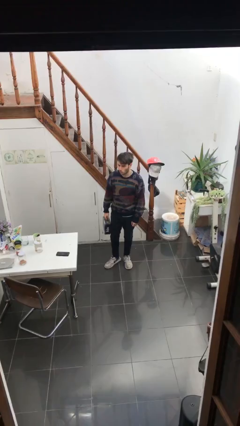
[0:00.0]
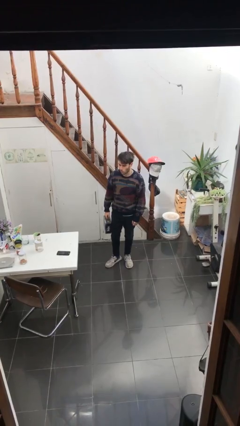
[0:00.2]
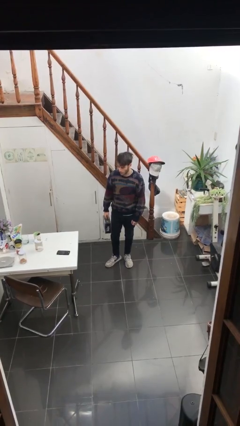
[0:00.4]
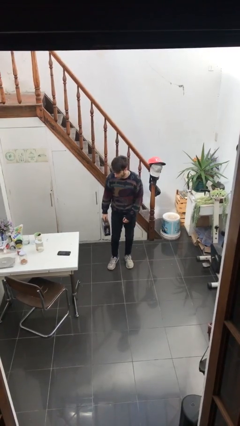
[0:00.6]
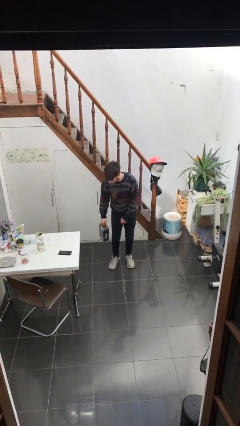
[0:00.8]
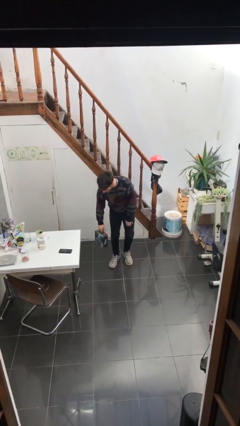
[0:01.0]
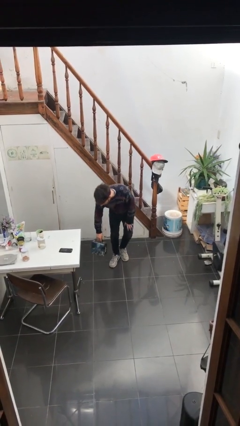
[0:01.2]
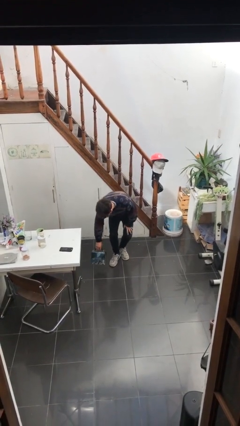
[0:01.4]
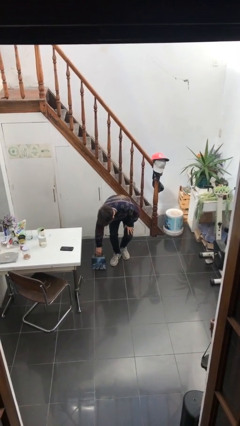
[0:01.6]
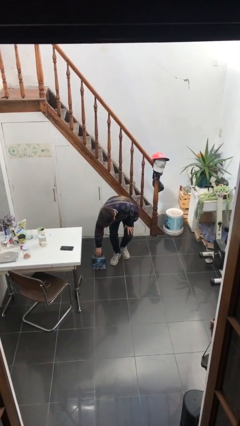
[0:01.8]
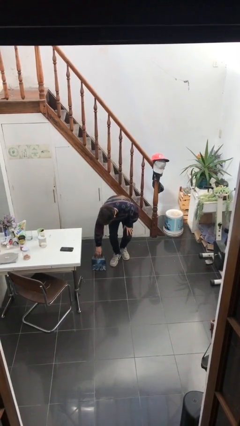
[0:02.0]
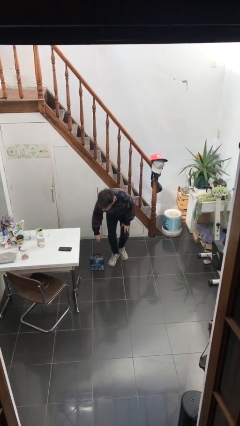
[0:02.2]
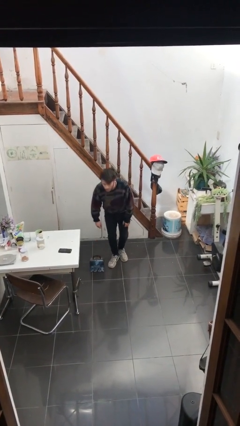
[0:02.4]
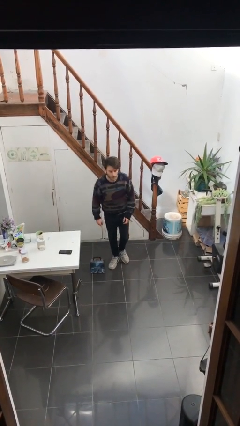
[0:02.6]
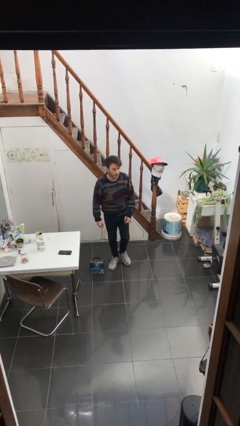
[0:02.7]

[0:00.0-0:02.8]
person puts down object on floor

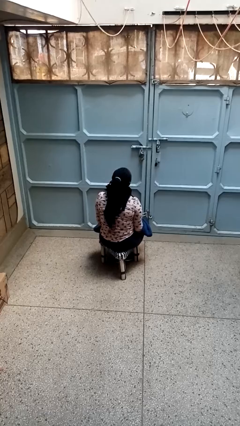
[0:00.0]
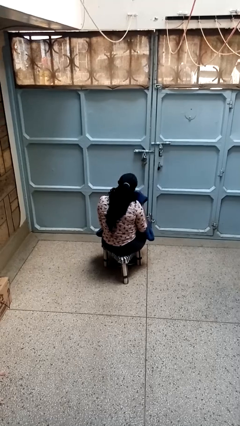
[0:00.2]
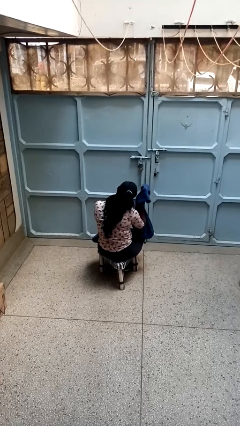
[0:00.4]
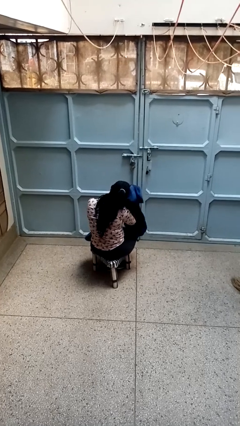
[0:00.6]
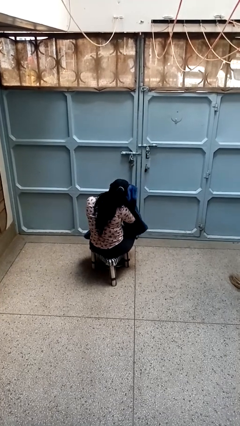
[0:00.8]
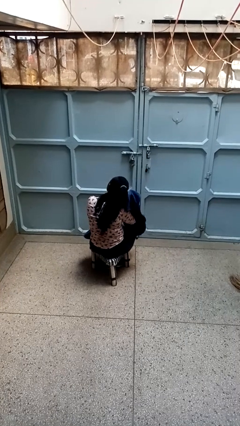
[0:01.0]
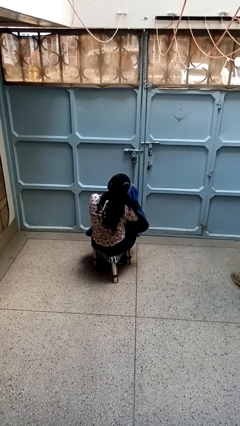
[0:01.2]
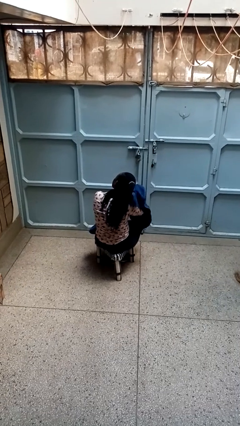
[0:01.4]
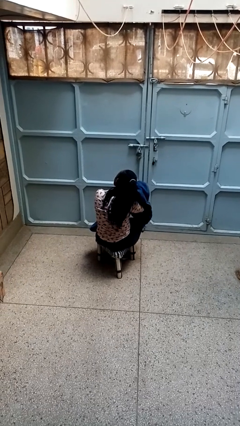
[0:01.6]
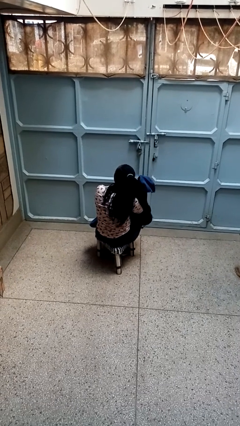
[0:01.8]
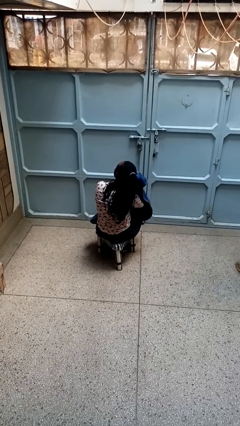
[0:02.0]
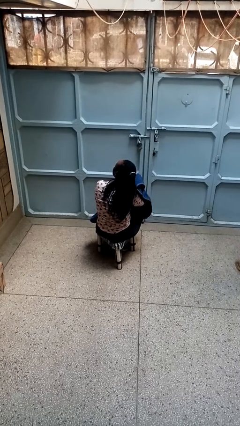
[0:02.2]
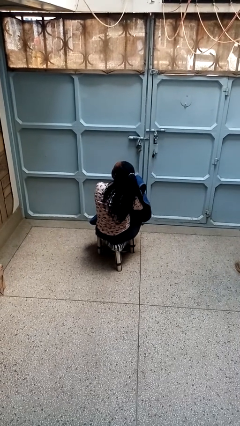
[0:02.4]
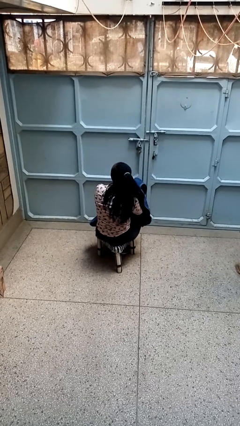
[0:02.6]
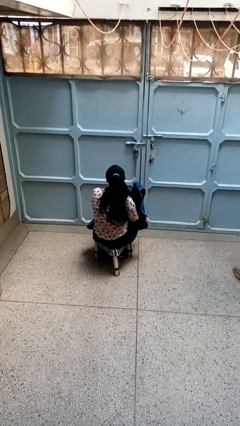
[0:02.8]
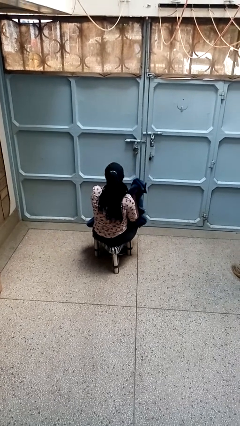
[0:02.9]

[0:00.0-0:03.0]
person dries hair with towel

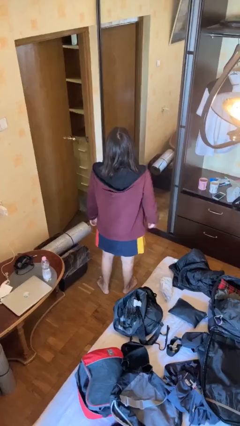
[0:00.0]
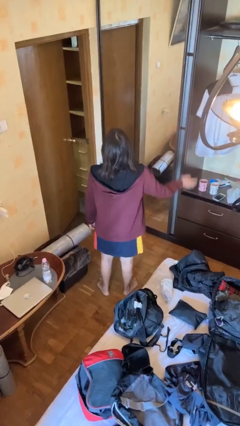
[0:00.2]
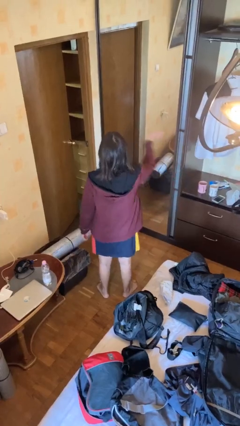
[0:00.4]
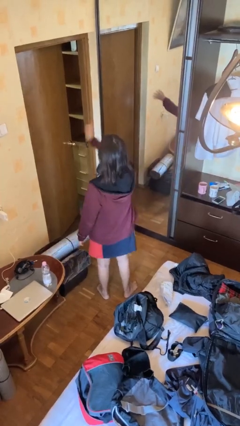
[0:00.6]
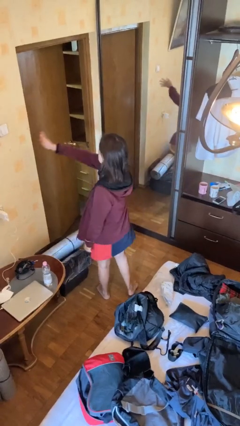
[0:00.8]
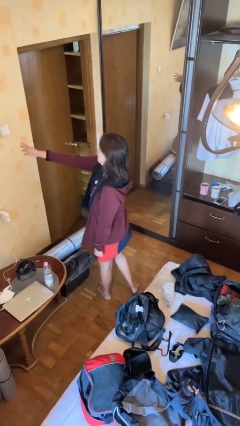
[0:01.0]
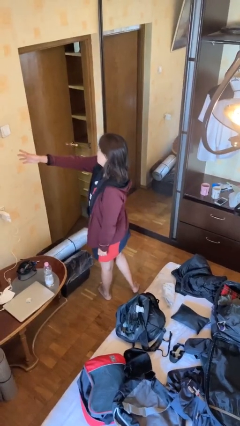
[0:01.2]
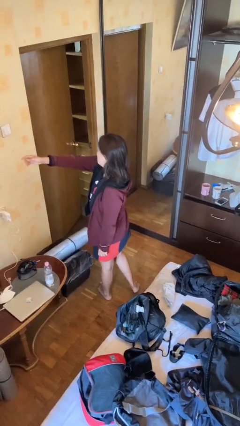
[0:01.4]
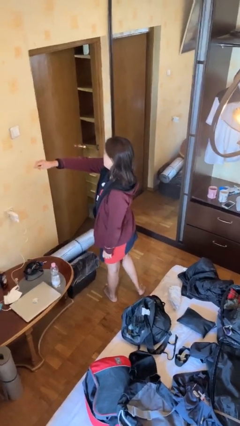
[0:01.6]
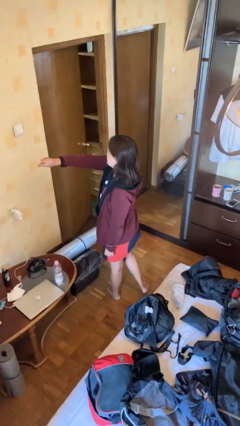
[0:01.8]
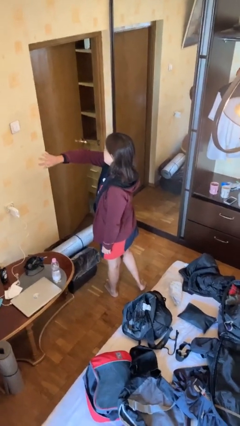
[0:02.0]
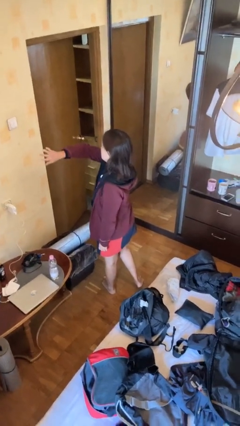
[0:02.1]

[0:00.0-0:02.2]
person gestures swipe left

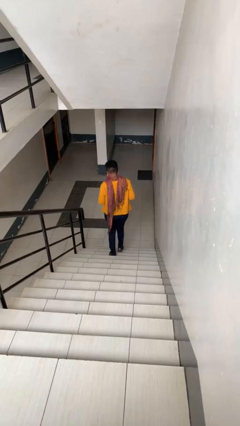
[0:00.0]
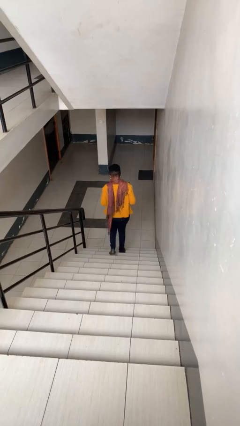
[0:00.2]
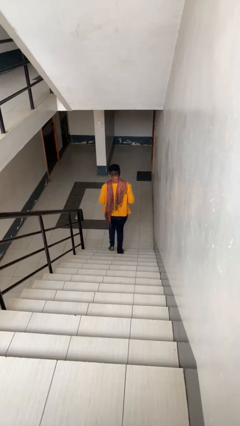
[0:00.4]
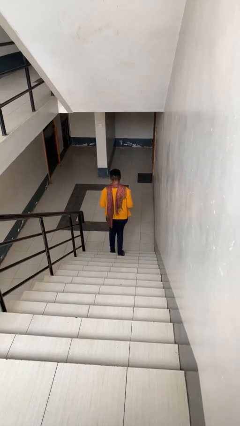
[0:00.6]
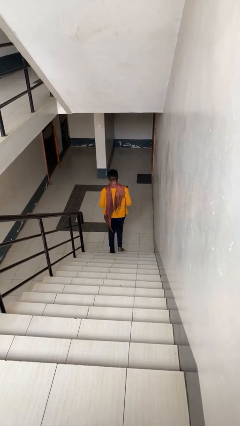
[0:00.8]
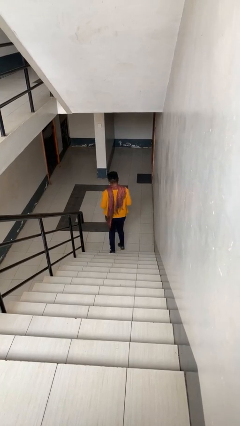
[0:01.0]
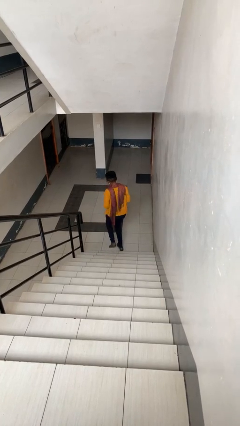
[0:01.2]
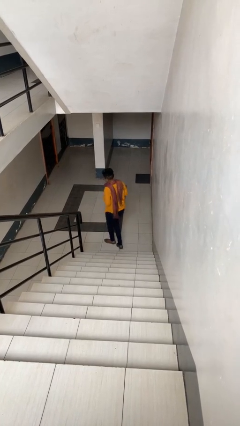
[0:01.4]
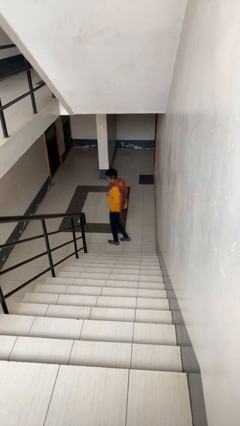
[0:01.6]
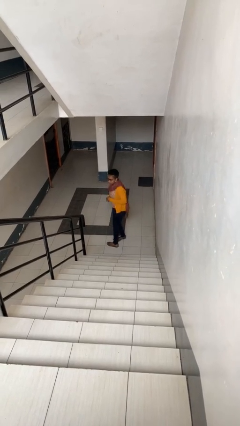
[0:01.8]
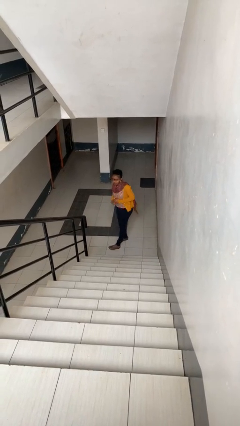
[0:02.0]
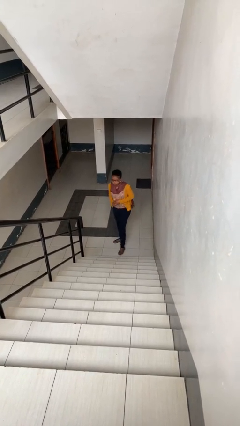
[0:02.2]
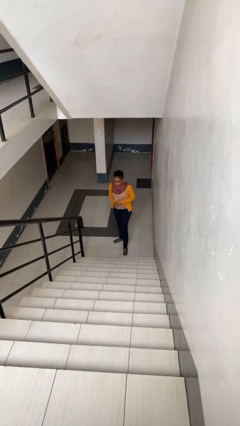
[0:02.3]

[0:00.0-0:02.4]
person climbs down stairs

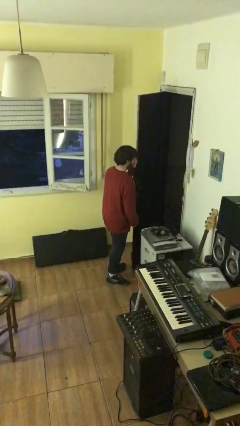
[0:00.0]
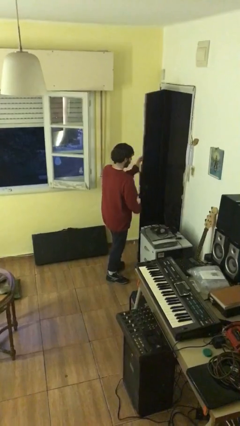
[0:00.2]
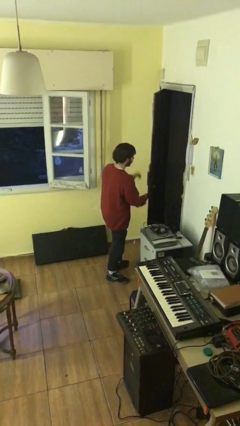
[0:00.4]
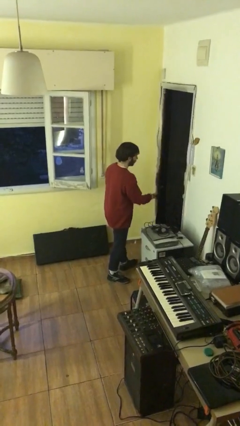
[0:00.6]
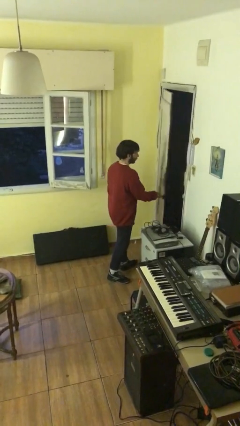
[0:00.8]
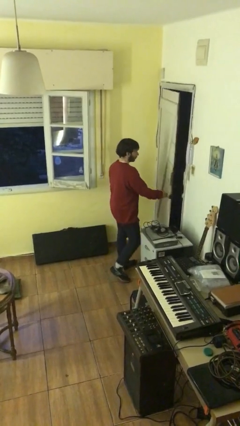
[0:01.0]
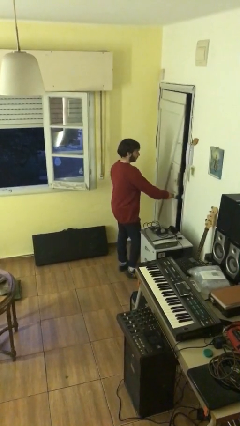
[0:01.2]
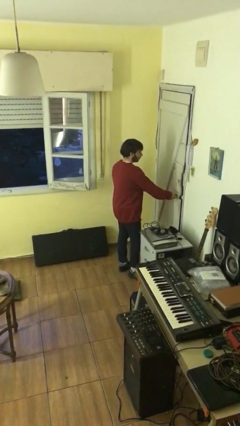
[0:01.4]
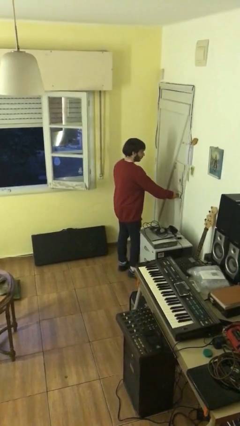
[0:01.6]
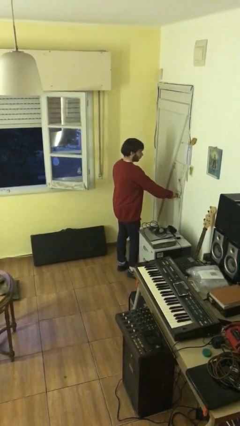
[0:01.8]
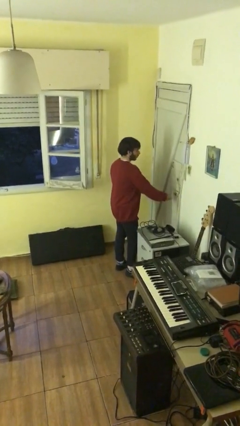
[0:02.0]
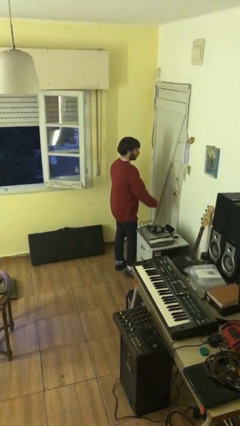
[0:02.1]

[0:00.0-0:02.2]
person closes facility door

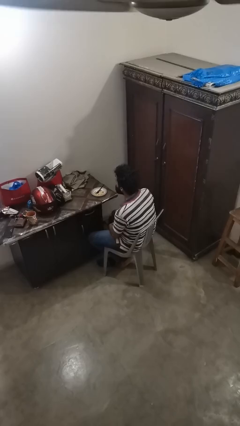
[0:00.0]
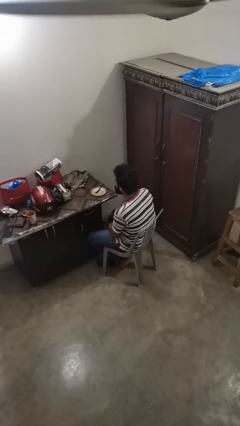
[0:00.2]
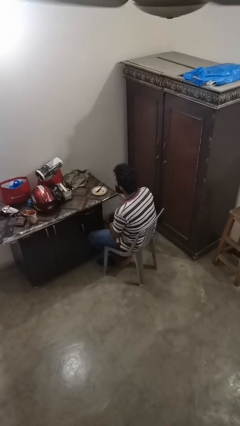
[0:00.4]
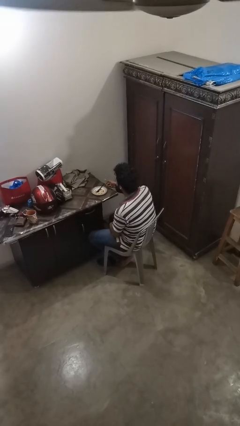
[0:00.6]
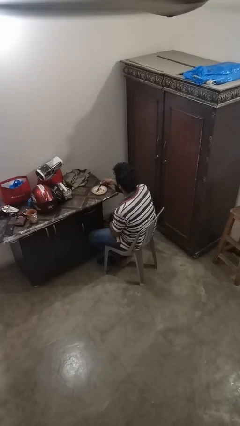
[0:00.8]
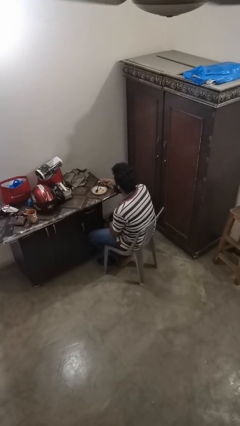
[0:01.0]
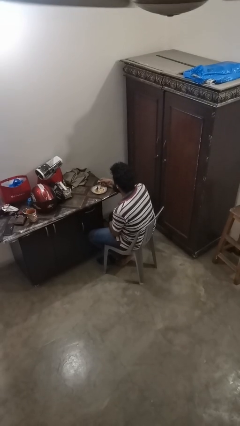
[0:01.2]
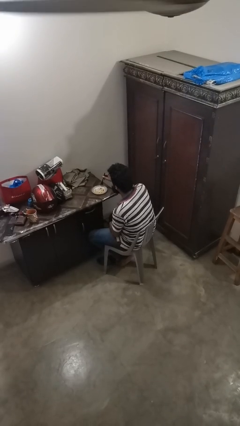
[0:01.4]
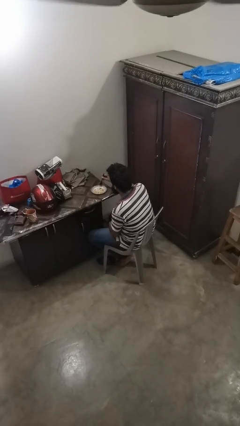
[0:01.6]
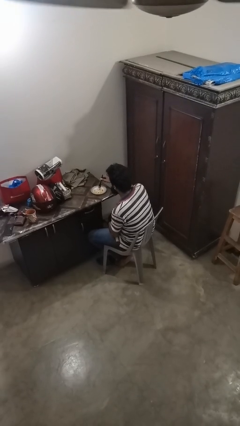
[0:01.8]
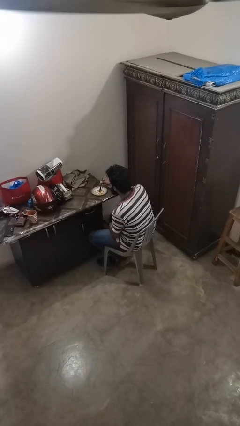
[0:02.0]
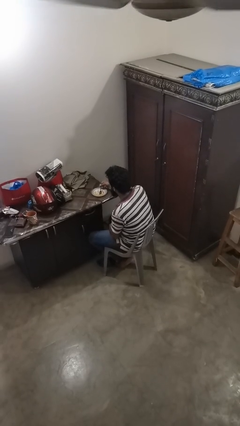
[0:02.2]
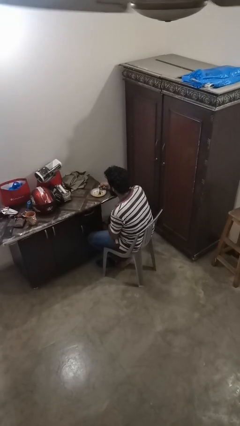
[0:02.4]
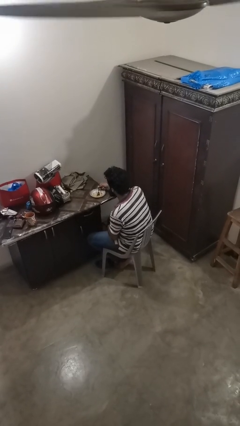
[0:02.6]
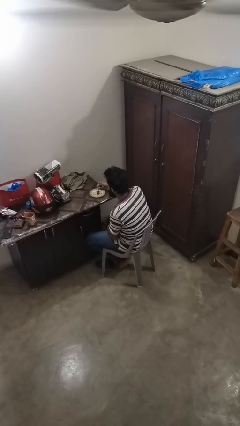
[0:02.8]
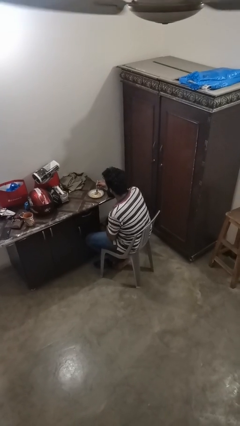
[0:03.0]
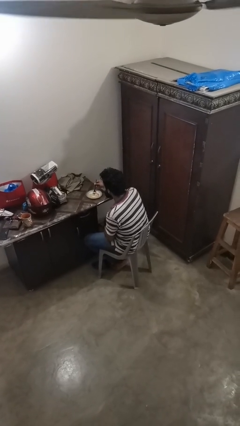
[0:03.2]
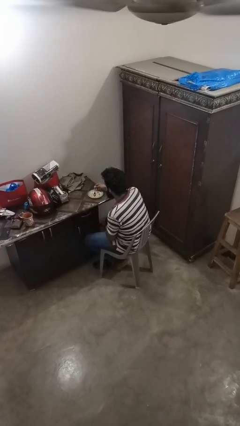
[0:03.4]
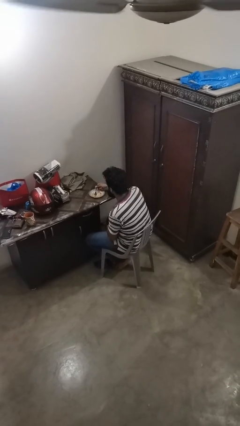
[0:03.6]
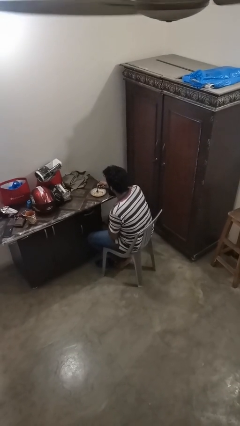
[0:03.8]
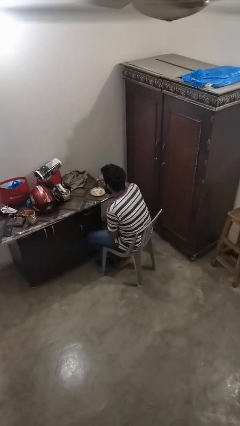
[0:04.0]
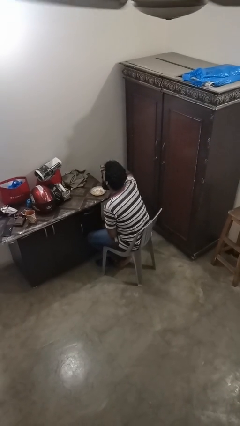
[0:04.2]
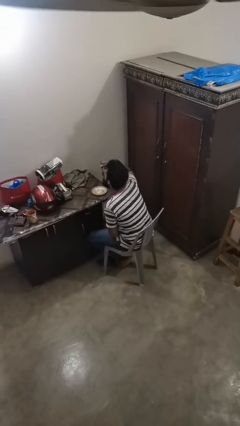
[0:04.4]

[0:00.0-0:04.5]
person eats with utensil

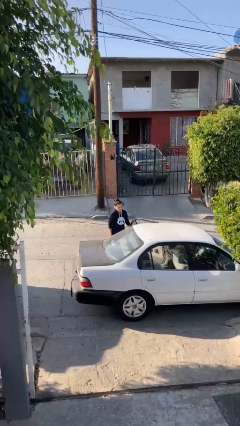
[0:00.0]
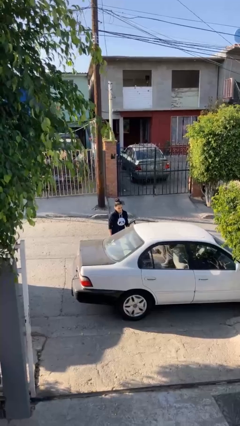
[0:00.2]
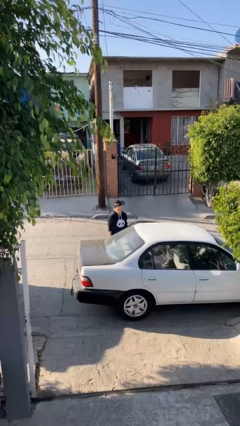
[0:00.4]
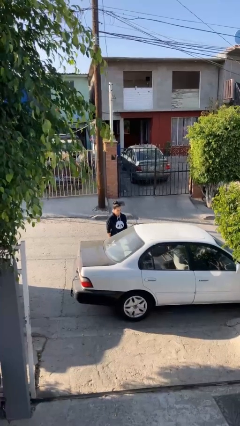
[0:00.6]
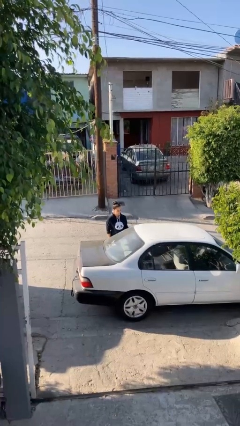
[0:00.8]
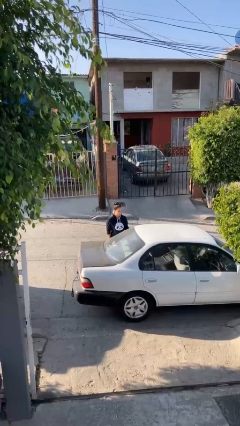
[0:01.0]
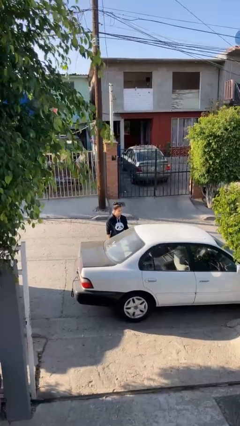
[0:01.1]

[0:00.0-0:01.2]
person closes car door
